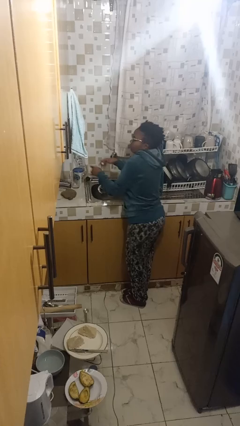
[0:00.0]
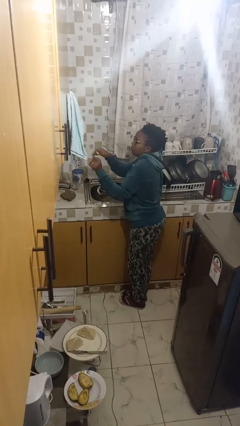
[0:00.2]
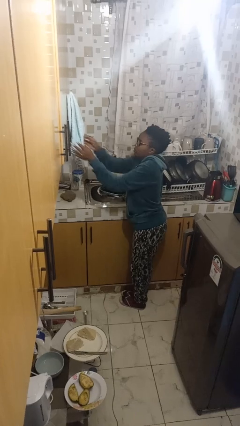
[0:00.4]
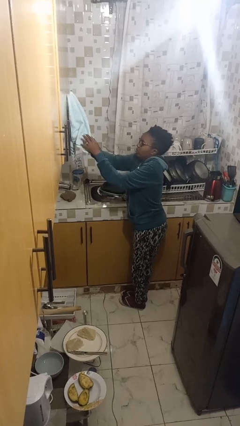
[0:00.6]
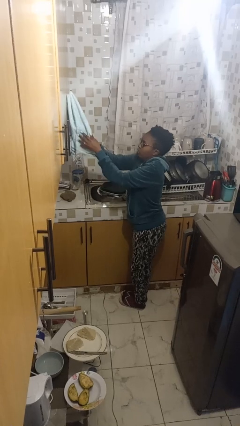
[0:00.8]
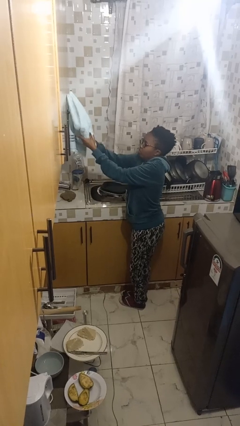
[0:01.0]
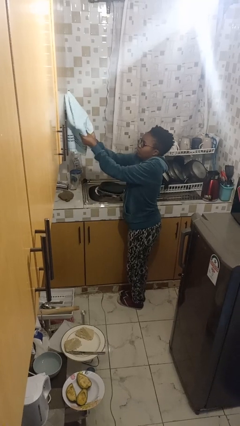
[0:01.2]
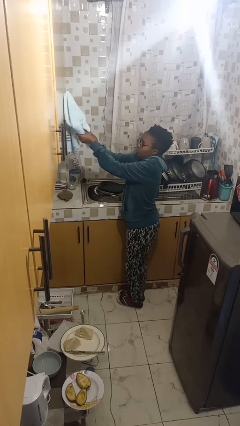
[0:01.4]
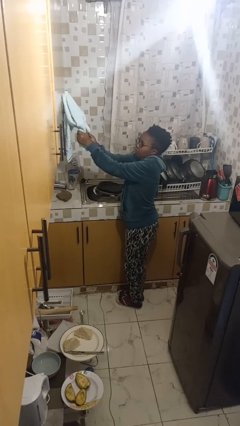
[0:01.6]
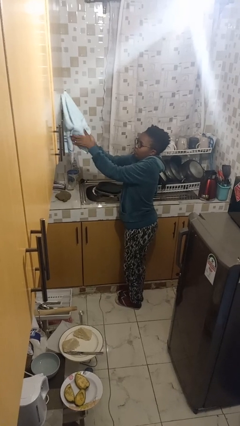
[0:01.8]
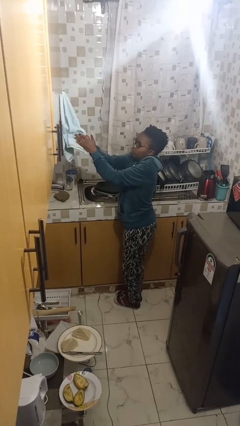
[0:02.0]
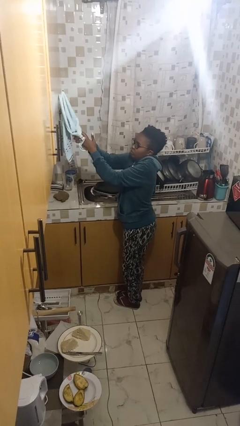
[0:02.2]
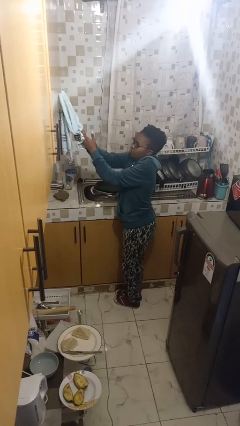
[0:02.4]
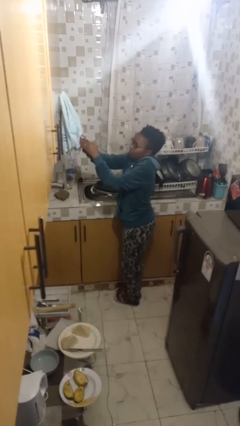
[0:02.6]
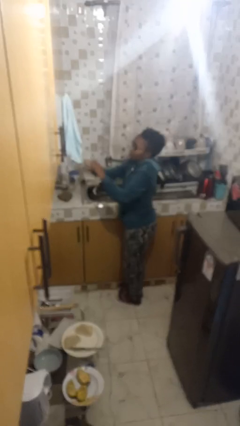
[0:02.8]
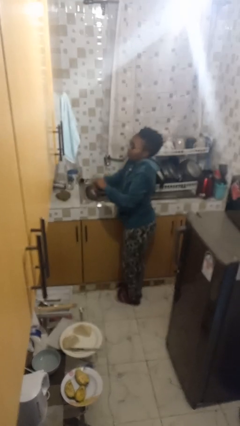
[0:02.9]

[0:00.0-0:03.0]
person dries hands with towel

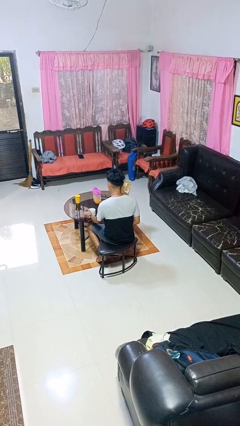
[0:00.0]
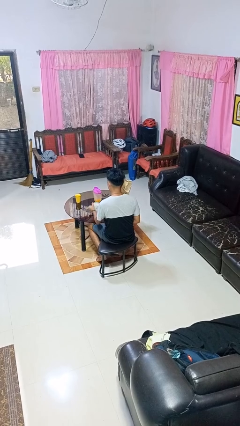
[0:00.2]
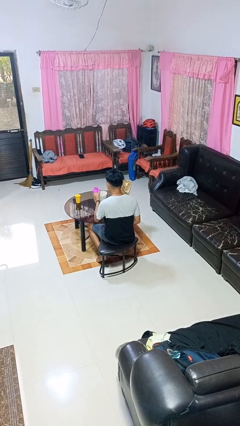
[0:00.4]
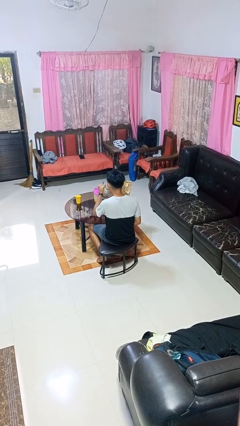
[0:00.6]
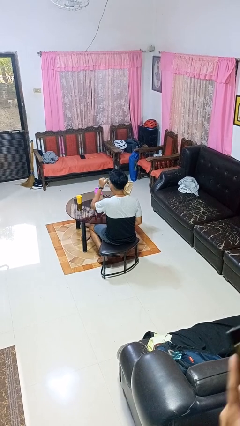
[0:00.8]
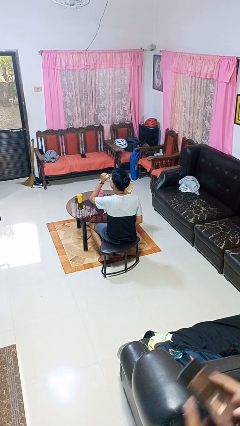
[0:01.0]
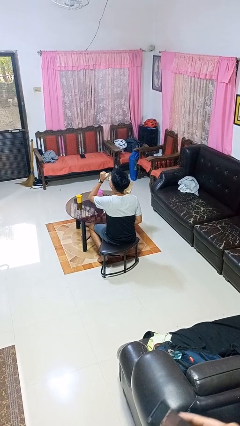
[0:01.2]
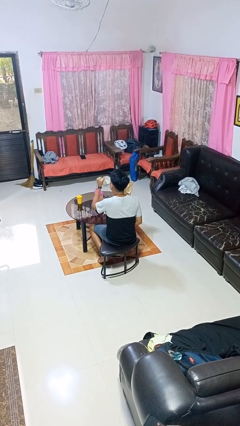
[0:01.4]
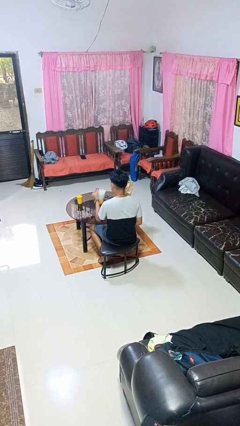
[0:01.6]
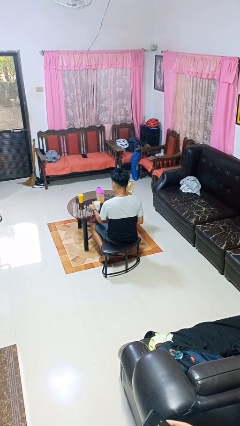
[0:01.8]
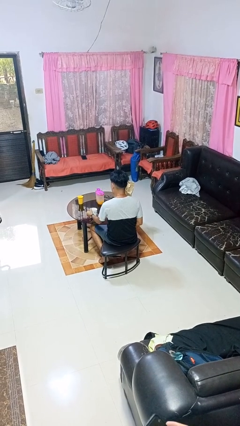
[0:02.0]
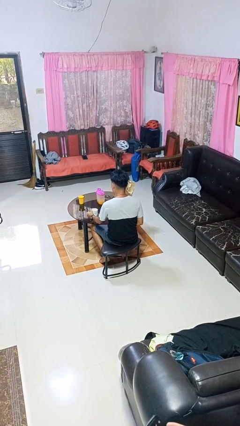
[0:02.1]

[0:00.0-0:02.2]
person drinks from mug

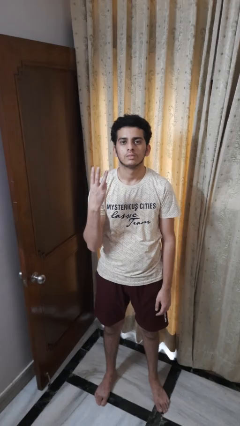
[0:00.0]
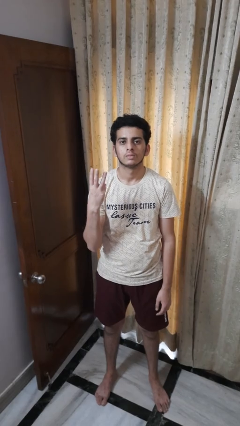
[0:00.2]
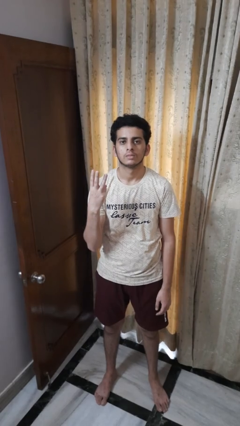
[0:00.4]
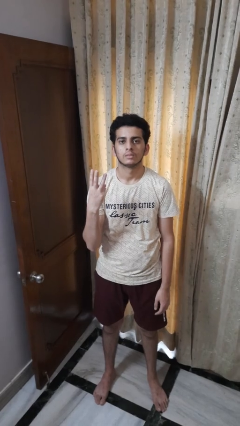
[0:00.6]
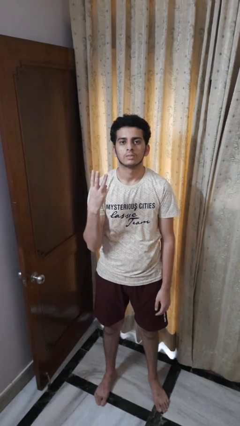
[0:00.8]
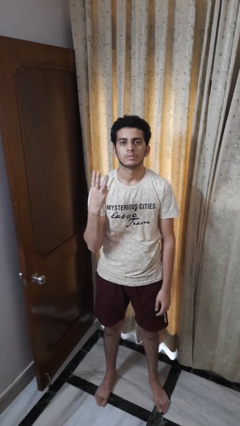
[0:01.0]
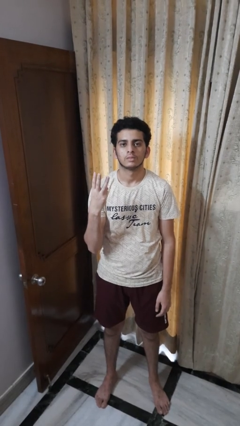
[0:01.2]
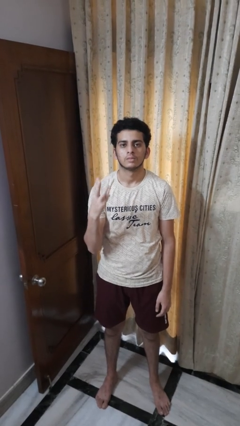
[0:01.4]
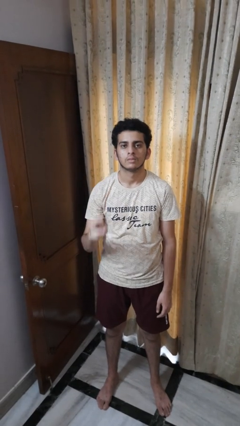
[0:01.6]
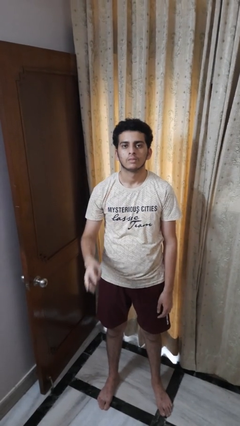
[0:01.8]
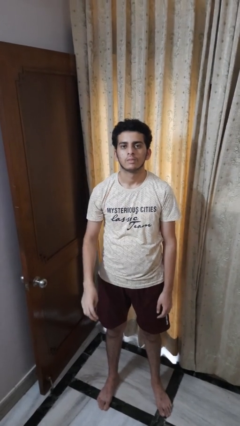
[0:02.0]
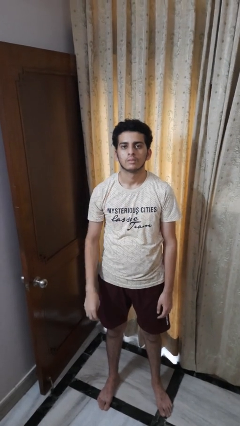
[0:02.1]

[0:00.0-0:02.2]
person gestures number three

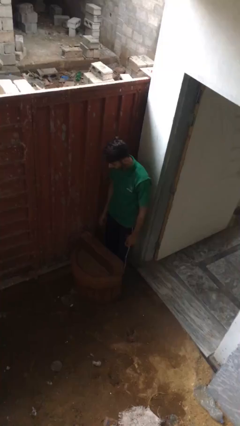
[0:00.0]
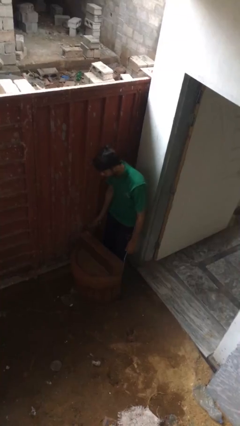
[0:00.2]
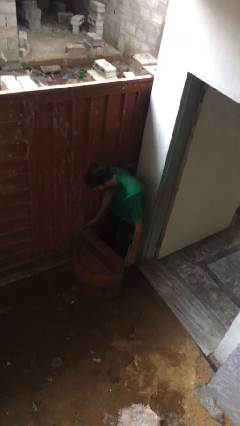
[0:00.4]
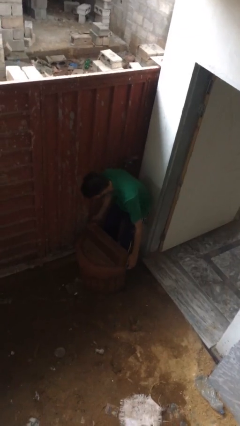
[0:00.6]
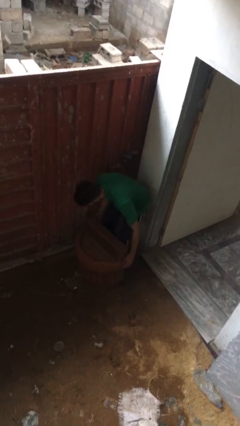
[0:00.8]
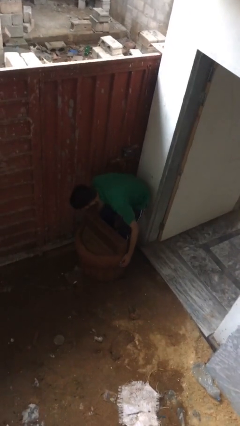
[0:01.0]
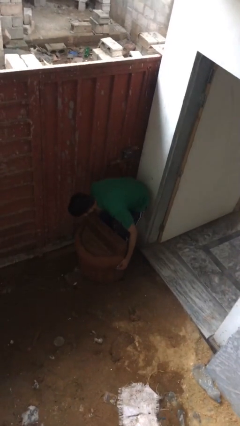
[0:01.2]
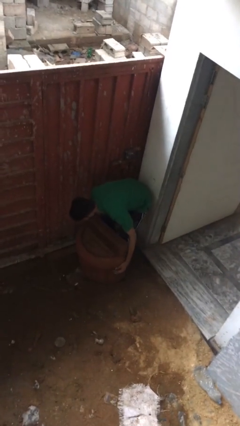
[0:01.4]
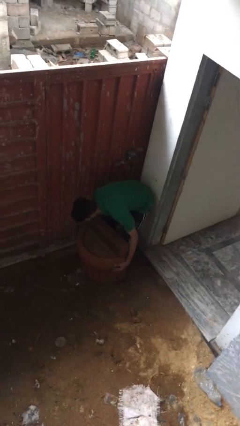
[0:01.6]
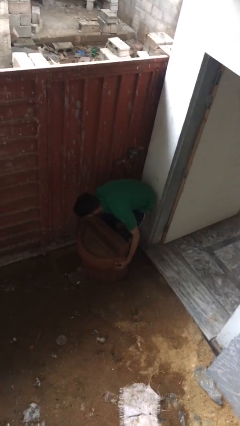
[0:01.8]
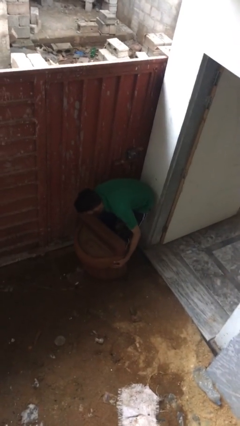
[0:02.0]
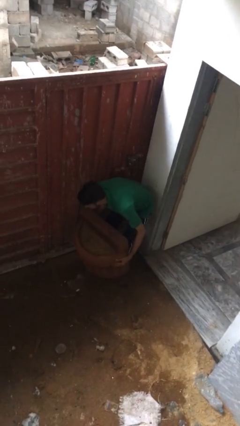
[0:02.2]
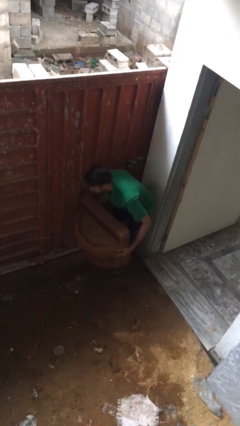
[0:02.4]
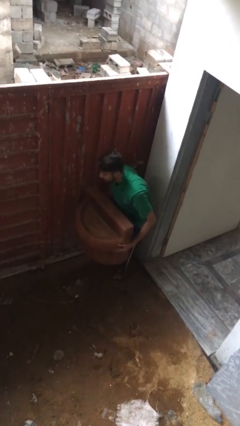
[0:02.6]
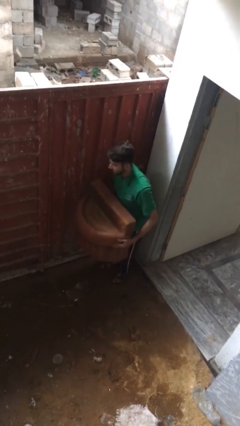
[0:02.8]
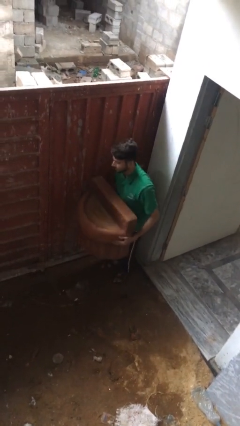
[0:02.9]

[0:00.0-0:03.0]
person picks up object from floor

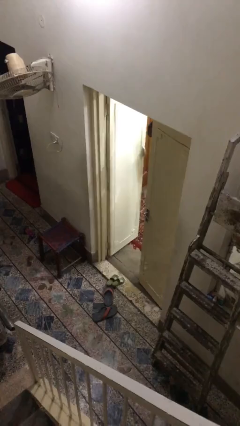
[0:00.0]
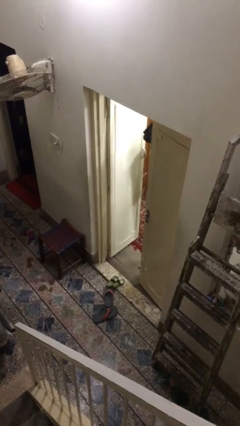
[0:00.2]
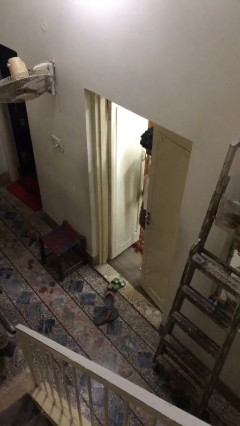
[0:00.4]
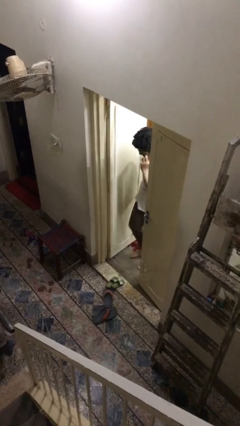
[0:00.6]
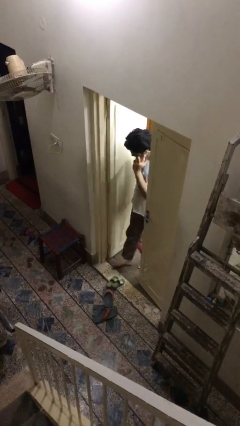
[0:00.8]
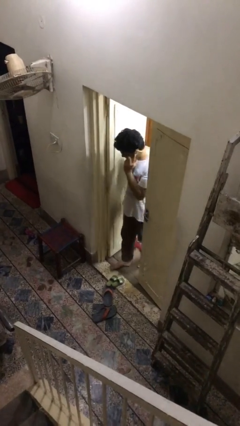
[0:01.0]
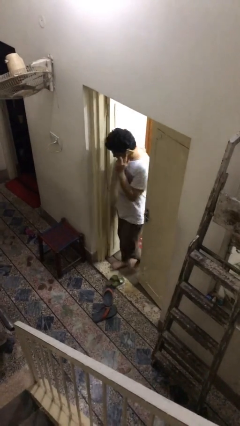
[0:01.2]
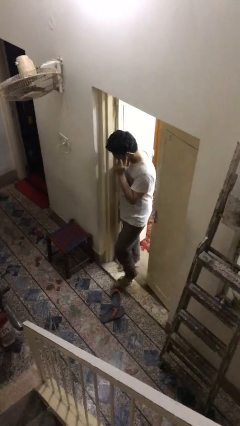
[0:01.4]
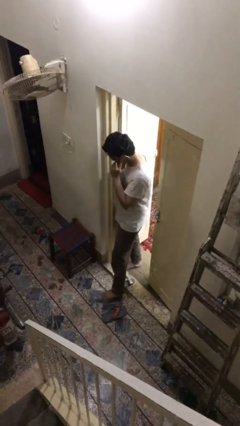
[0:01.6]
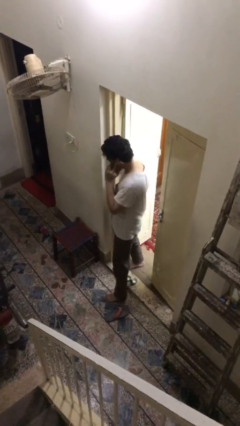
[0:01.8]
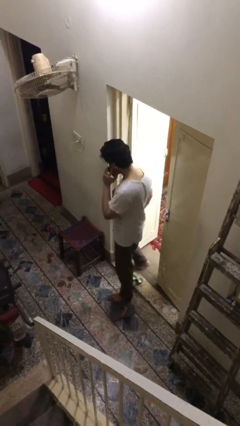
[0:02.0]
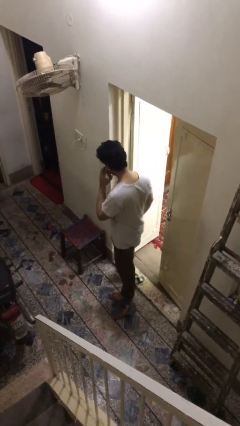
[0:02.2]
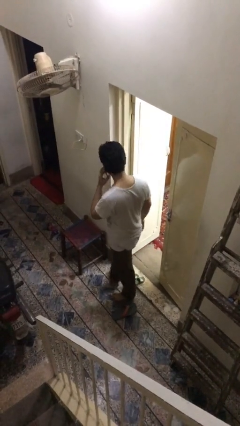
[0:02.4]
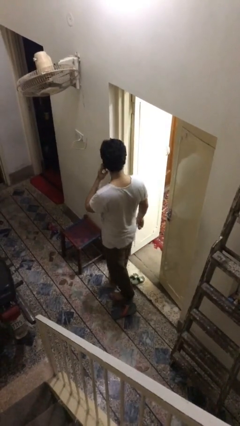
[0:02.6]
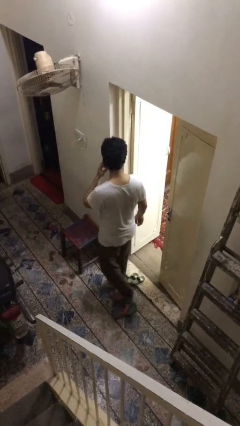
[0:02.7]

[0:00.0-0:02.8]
person enters scene through structure

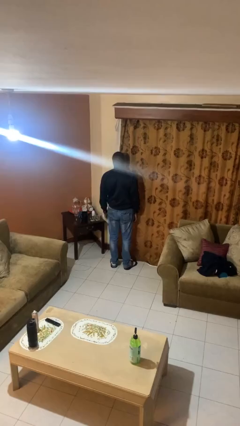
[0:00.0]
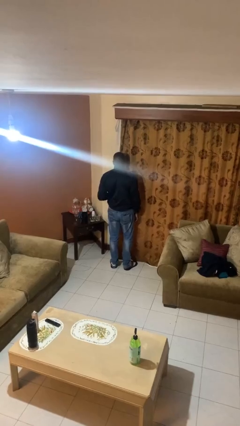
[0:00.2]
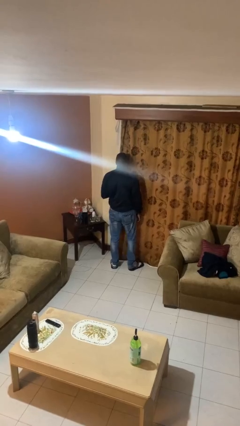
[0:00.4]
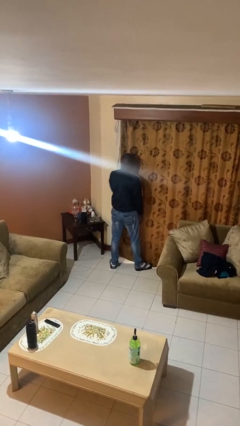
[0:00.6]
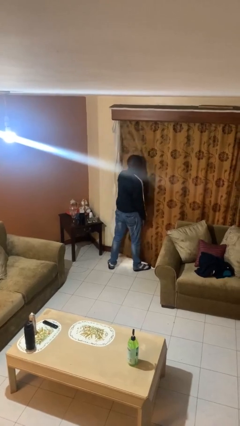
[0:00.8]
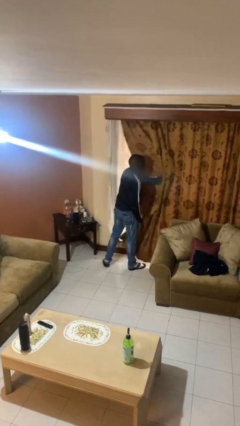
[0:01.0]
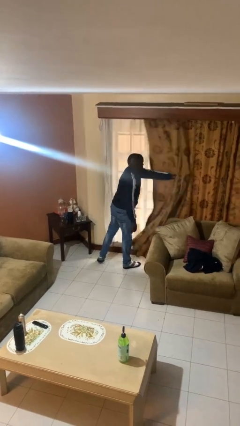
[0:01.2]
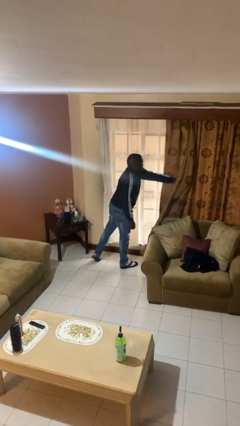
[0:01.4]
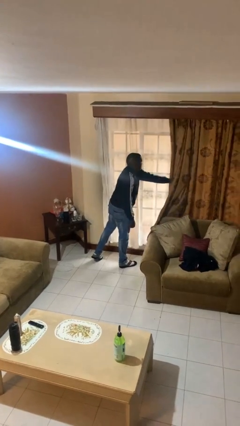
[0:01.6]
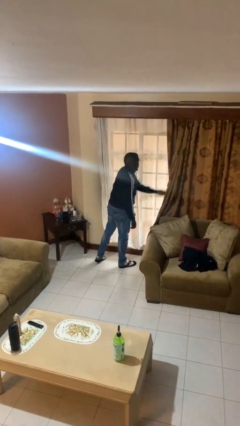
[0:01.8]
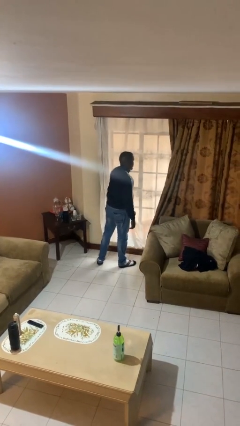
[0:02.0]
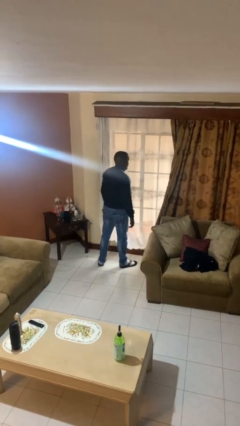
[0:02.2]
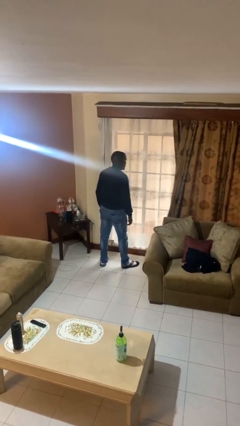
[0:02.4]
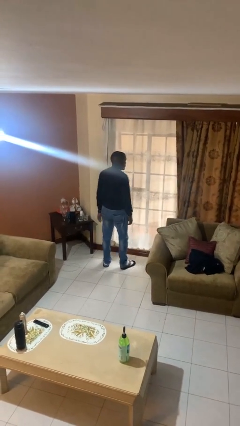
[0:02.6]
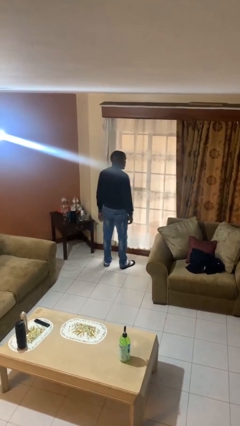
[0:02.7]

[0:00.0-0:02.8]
person opens curtains

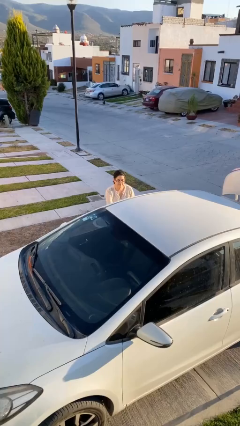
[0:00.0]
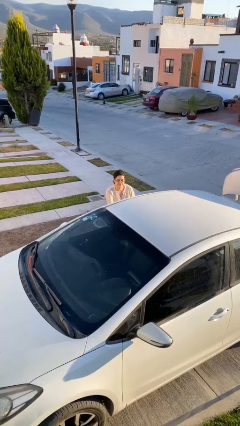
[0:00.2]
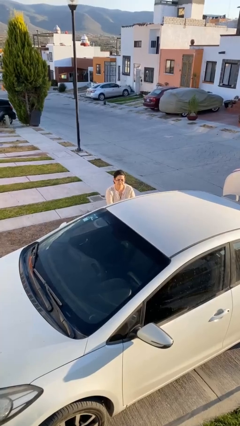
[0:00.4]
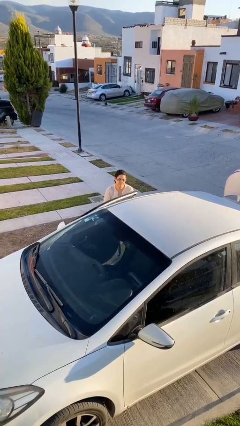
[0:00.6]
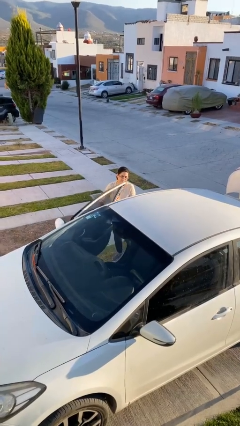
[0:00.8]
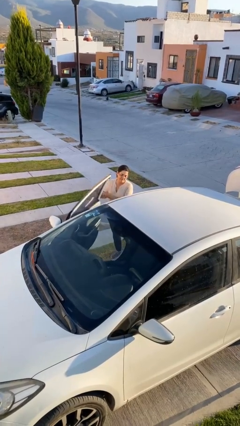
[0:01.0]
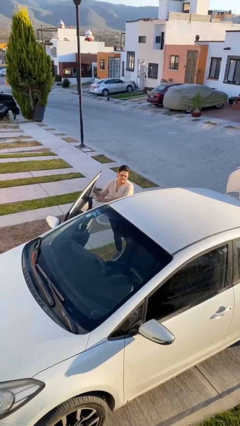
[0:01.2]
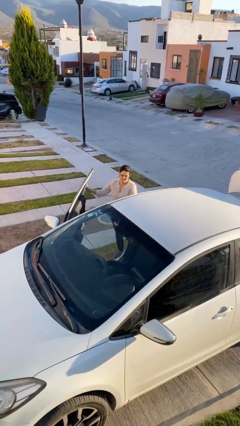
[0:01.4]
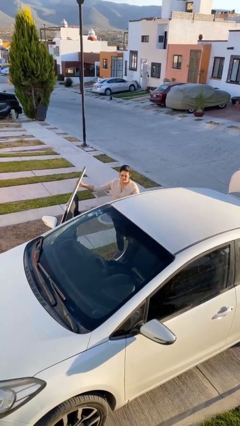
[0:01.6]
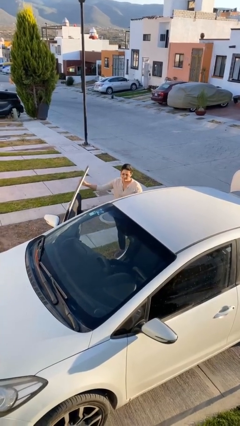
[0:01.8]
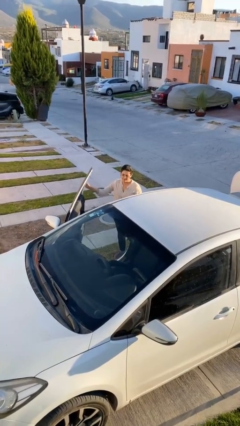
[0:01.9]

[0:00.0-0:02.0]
person opens car door
